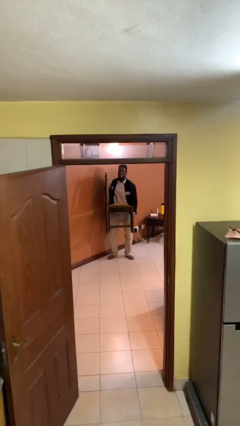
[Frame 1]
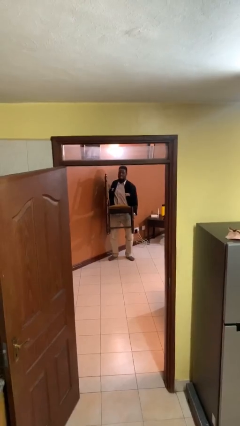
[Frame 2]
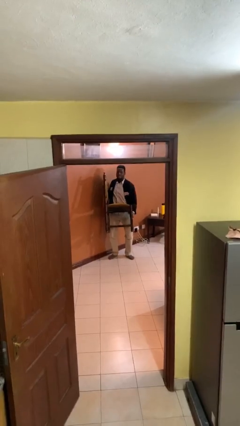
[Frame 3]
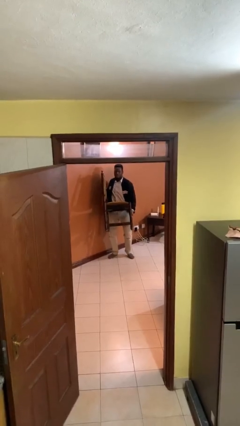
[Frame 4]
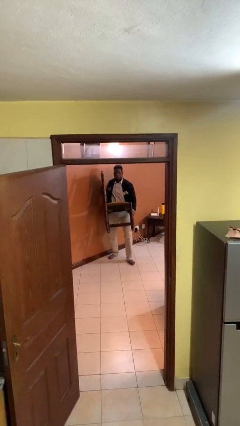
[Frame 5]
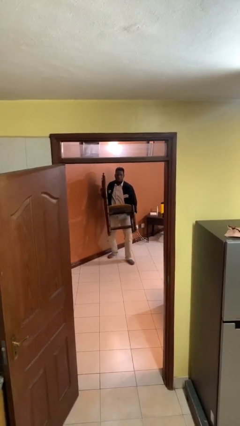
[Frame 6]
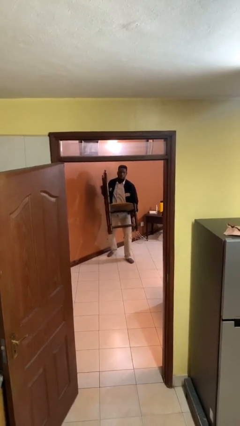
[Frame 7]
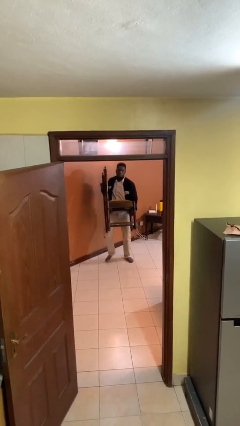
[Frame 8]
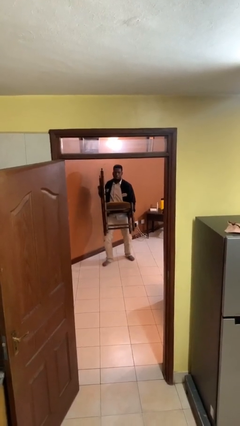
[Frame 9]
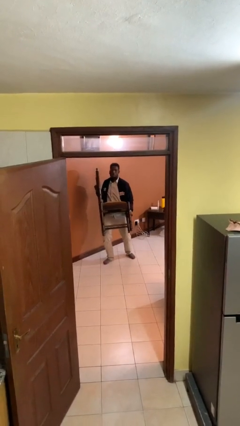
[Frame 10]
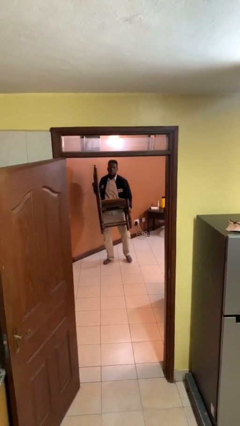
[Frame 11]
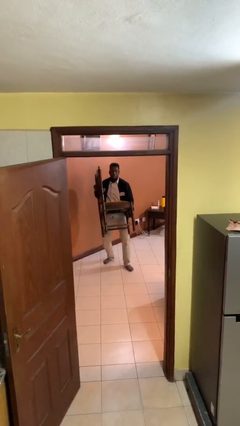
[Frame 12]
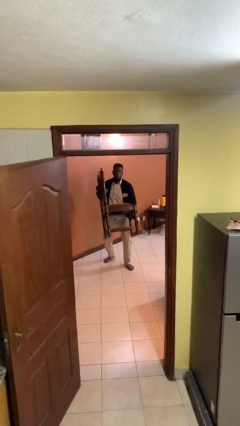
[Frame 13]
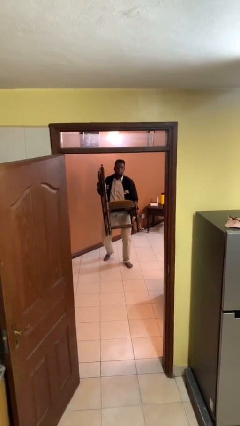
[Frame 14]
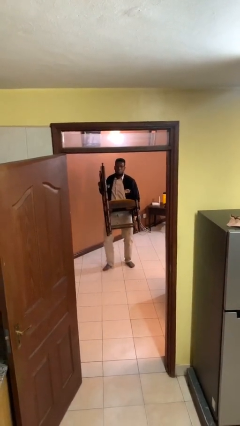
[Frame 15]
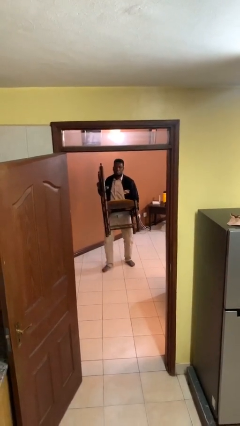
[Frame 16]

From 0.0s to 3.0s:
person carries heavy object

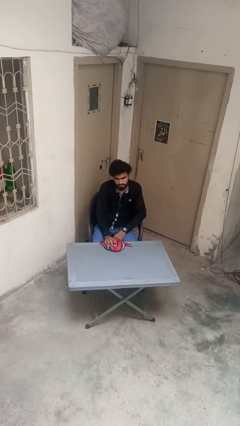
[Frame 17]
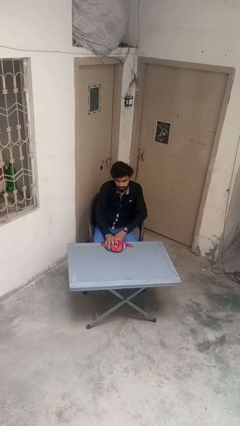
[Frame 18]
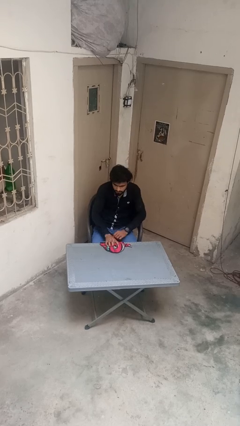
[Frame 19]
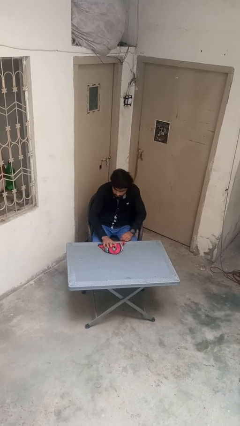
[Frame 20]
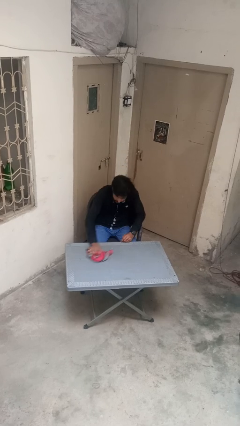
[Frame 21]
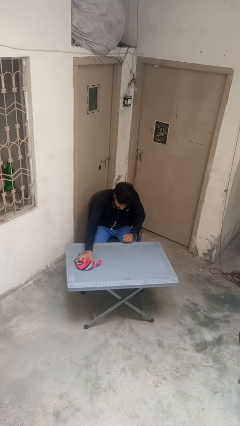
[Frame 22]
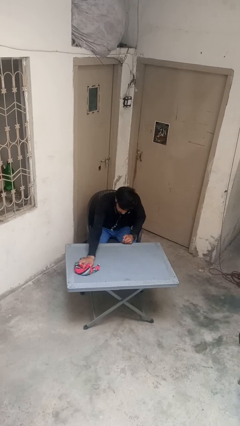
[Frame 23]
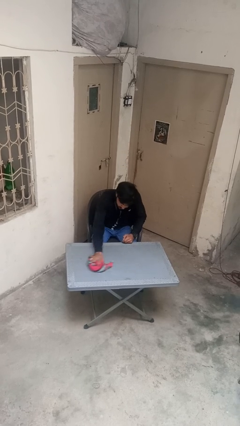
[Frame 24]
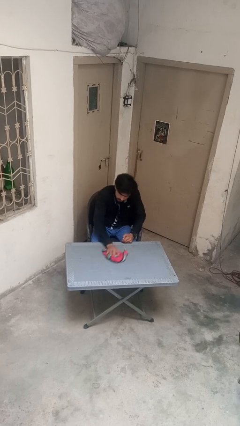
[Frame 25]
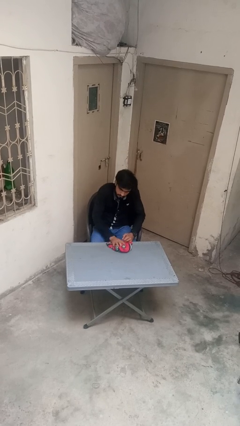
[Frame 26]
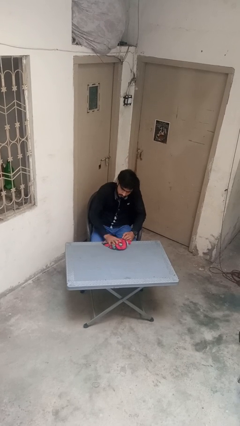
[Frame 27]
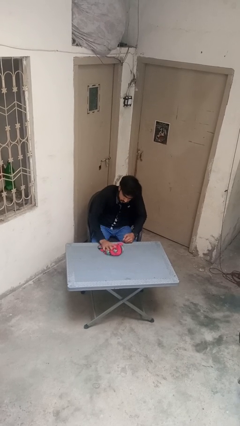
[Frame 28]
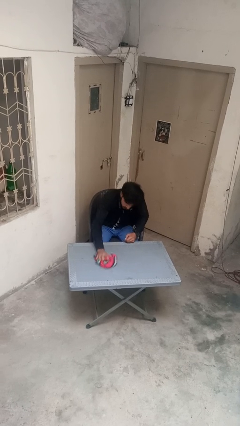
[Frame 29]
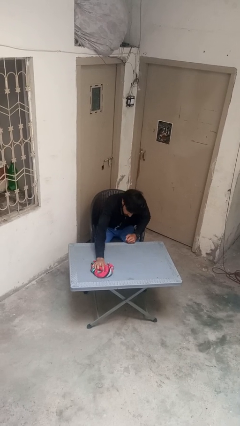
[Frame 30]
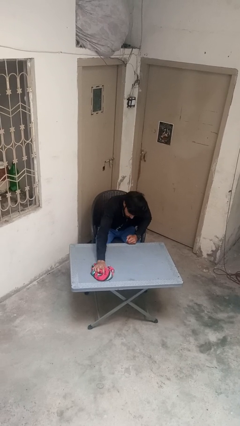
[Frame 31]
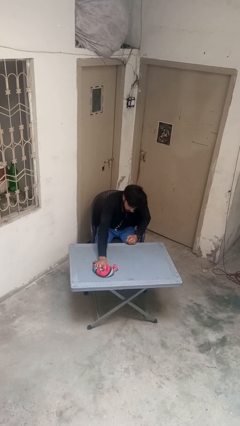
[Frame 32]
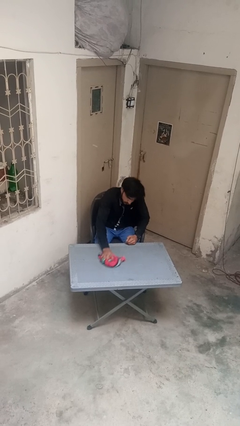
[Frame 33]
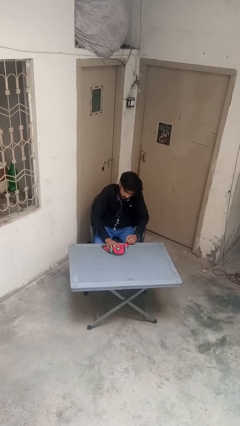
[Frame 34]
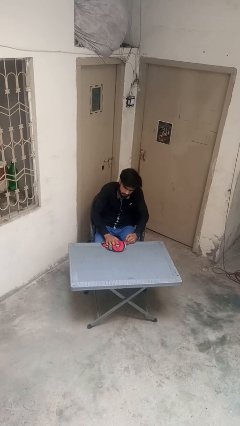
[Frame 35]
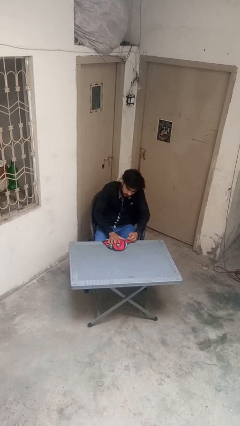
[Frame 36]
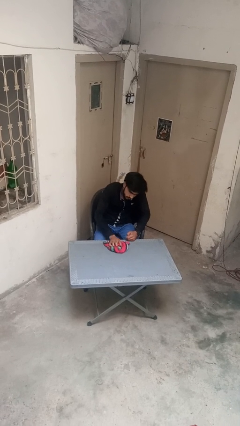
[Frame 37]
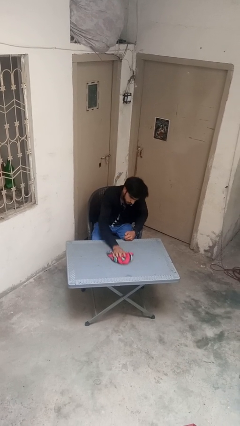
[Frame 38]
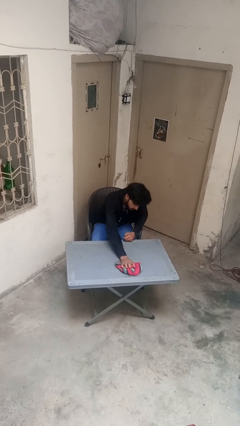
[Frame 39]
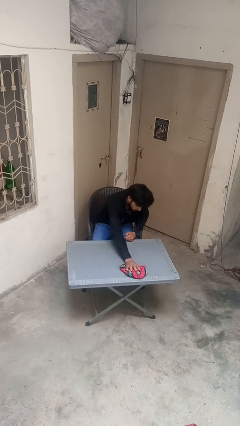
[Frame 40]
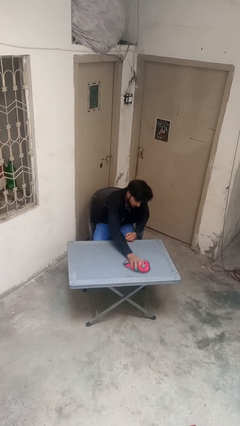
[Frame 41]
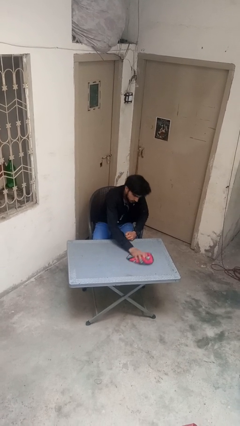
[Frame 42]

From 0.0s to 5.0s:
person cleans table with rag

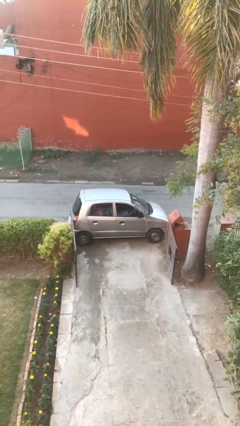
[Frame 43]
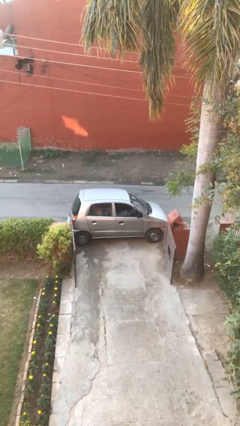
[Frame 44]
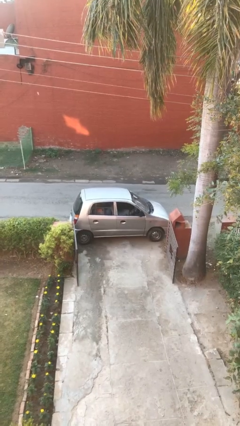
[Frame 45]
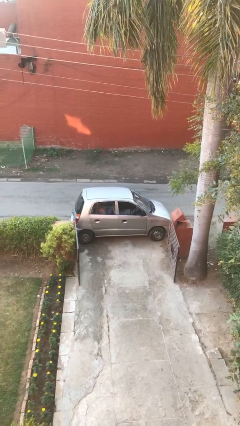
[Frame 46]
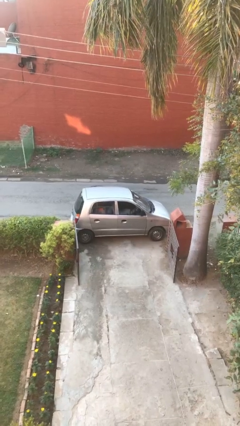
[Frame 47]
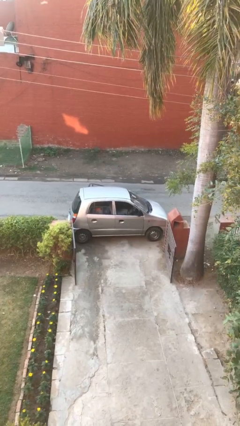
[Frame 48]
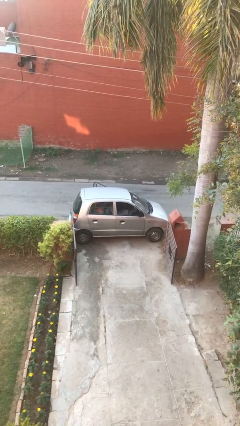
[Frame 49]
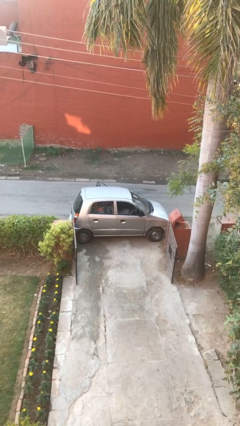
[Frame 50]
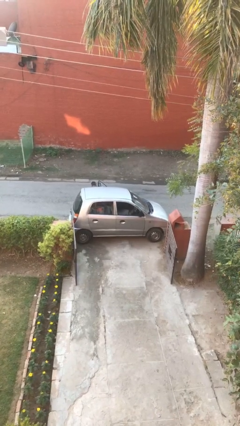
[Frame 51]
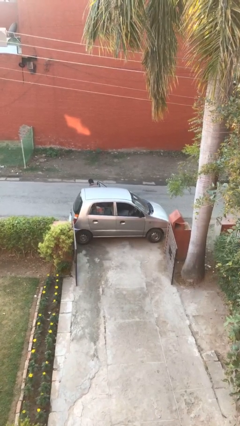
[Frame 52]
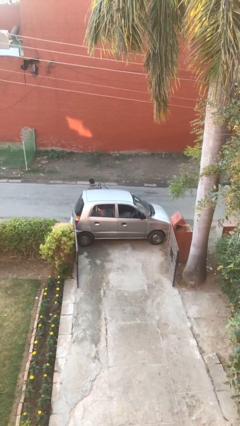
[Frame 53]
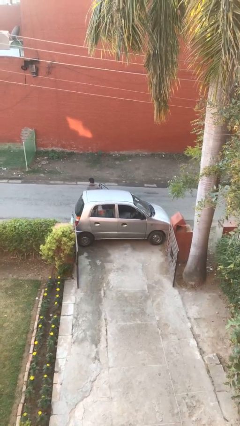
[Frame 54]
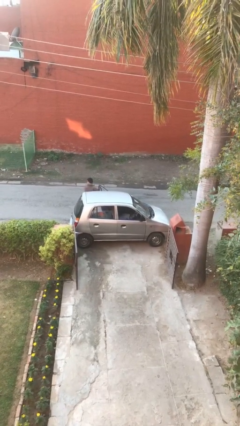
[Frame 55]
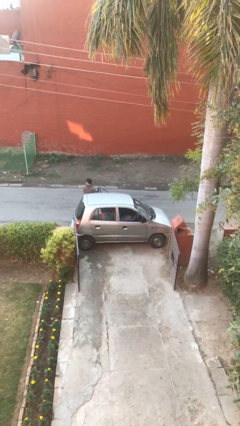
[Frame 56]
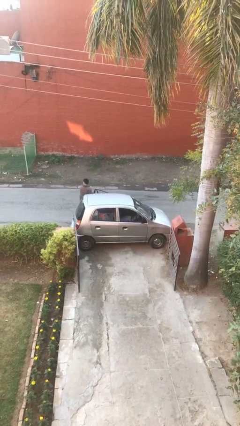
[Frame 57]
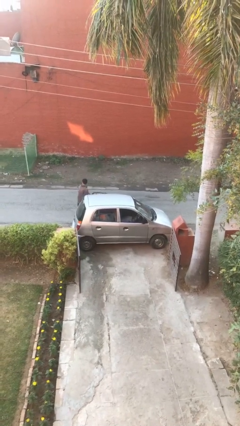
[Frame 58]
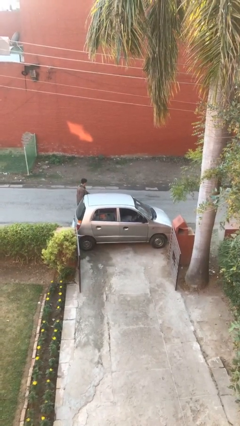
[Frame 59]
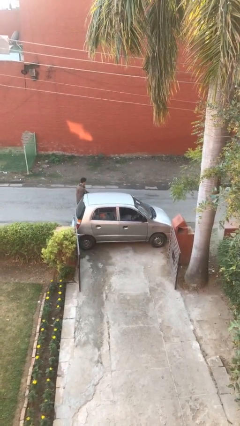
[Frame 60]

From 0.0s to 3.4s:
car drops off person

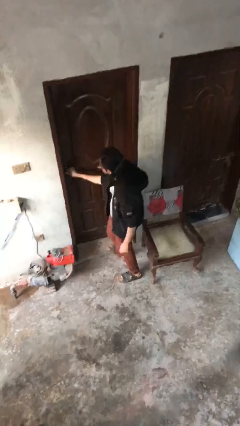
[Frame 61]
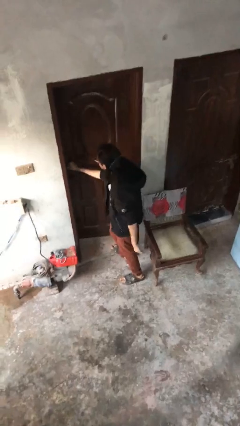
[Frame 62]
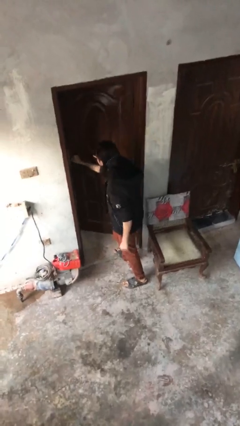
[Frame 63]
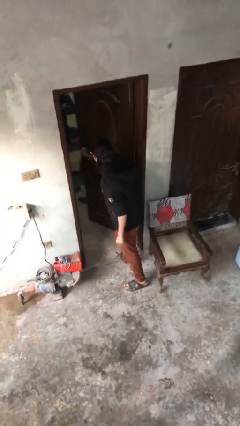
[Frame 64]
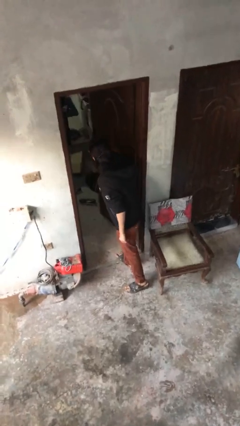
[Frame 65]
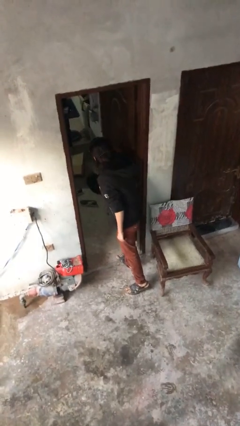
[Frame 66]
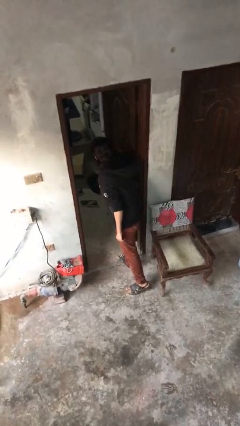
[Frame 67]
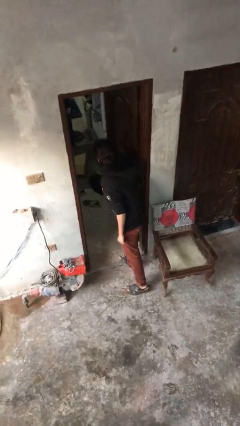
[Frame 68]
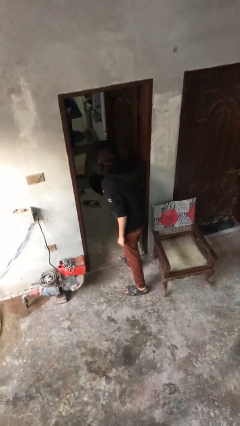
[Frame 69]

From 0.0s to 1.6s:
person opens facility door

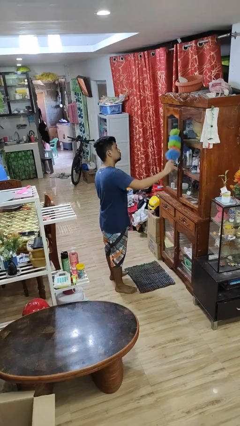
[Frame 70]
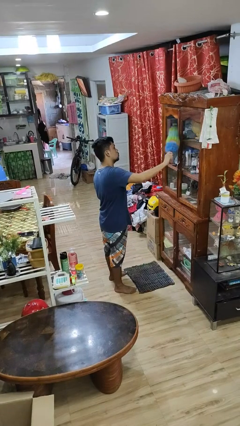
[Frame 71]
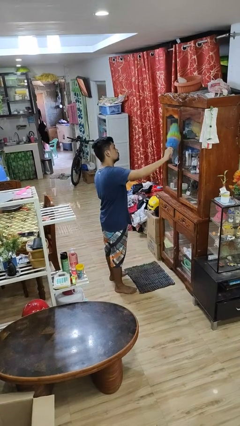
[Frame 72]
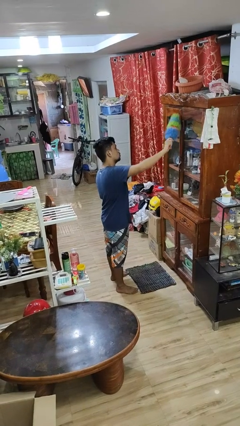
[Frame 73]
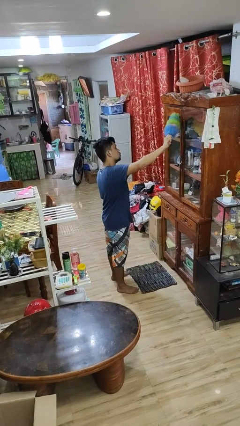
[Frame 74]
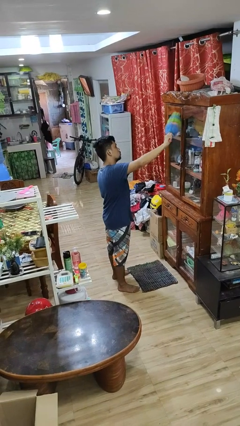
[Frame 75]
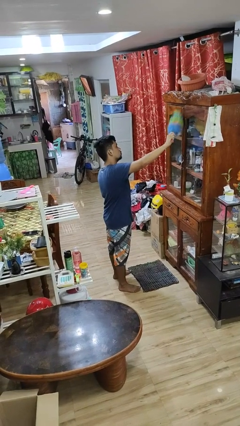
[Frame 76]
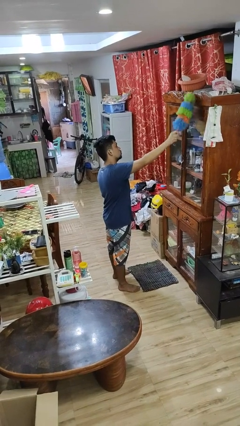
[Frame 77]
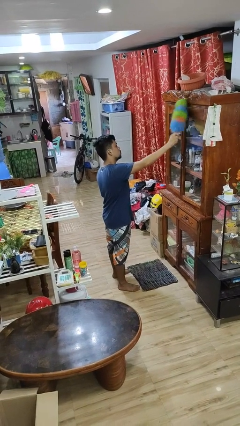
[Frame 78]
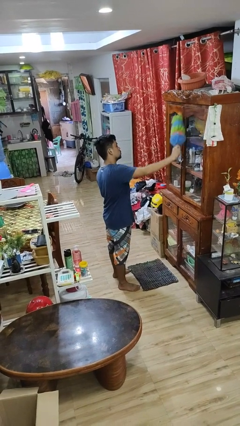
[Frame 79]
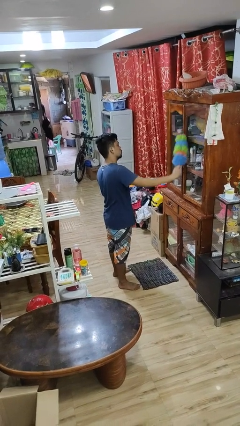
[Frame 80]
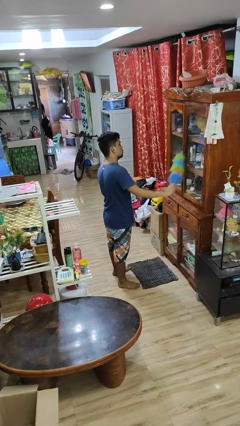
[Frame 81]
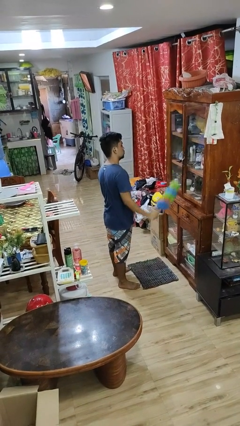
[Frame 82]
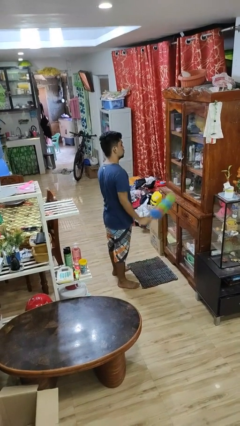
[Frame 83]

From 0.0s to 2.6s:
person dusts furniture

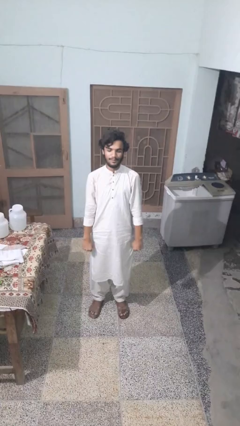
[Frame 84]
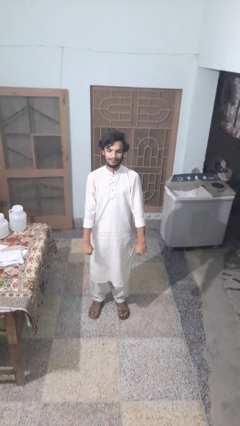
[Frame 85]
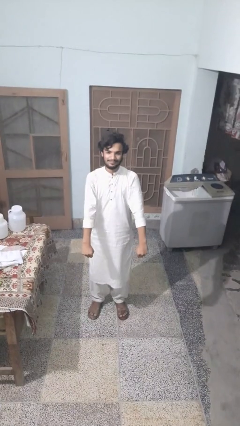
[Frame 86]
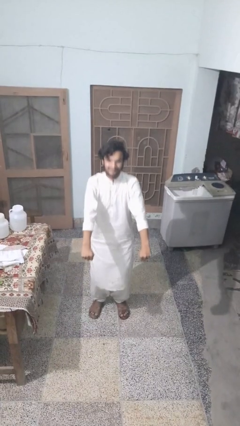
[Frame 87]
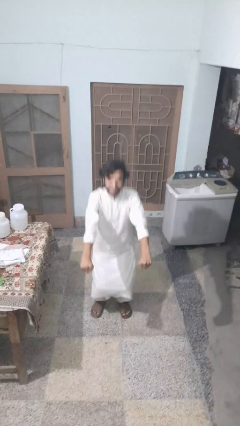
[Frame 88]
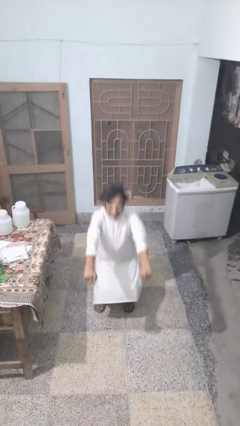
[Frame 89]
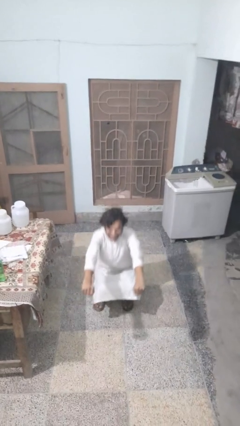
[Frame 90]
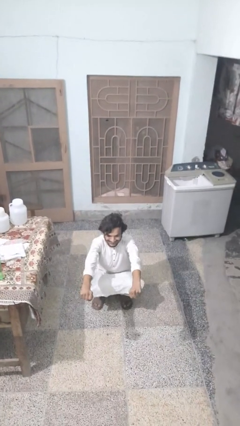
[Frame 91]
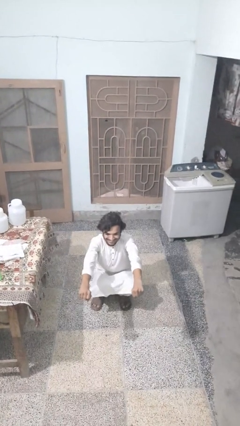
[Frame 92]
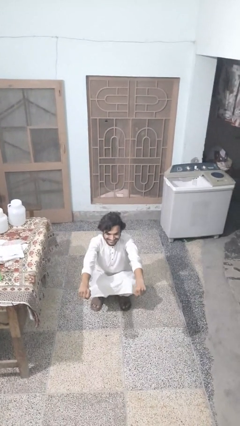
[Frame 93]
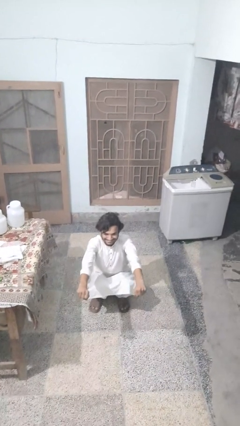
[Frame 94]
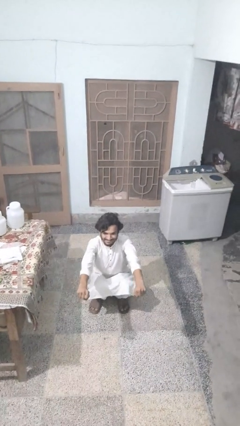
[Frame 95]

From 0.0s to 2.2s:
person squats
